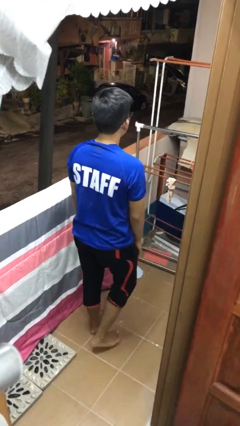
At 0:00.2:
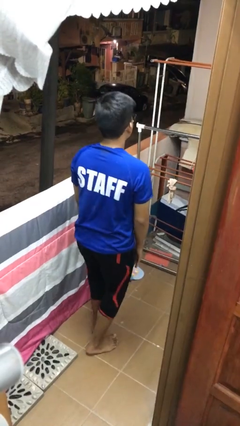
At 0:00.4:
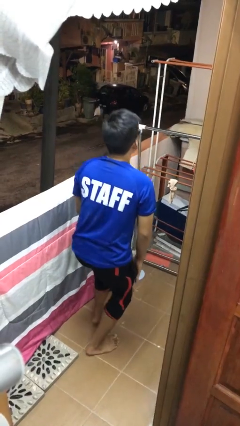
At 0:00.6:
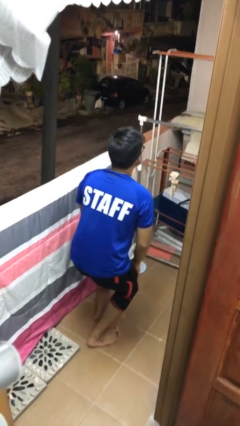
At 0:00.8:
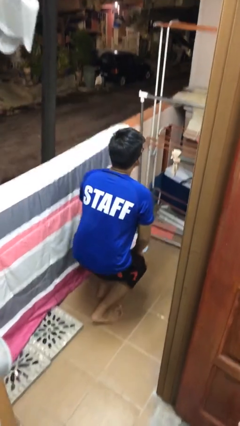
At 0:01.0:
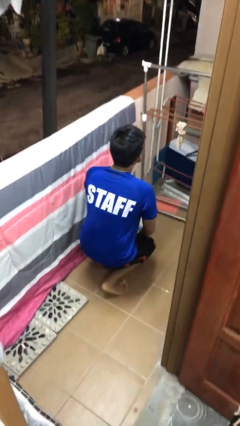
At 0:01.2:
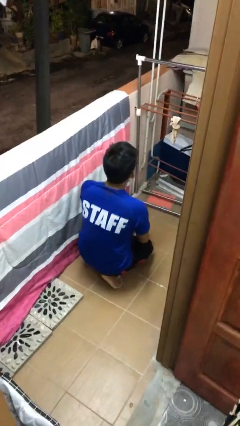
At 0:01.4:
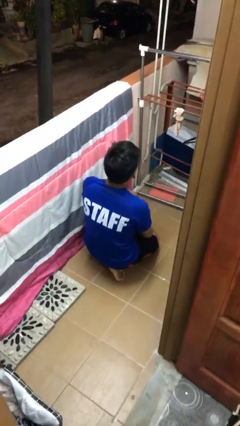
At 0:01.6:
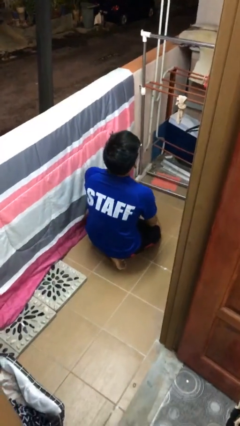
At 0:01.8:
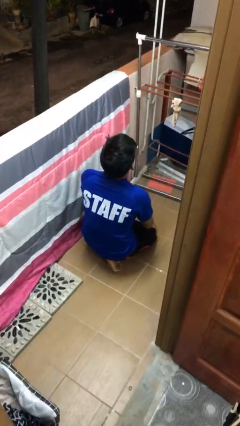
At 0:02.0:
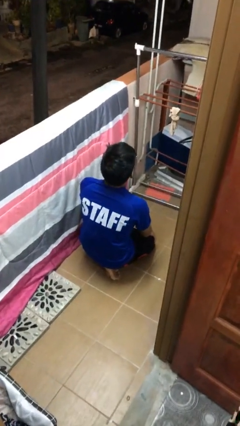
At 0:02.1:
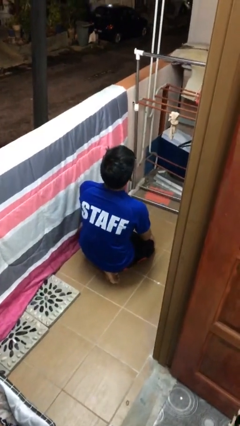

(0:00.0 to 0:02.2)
person kneels

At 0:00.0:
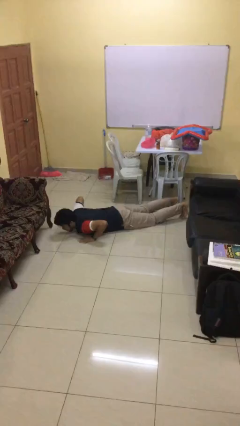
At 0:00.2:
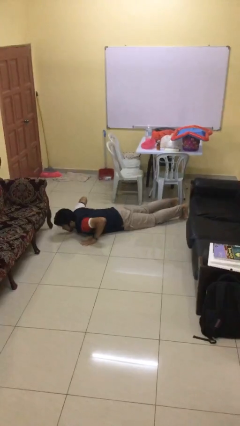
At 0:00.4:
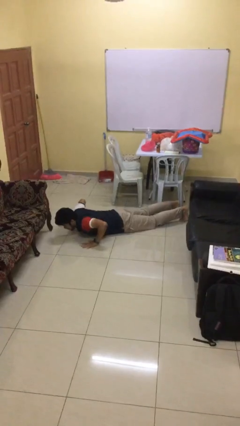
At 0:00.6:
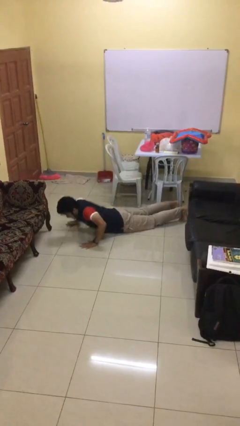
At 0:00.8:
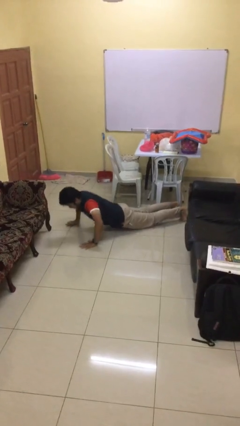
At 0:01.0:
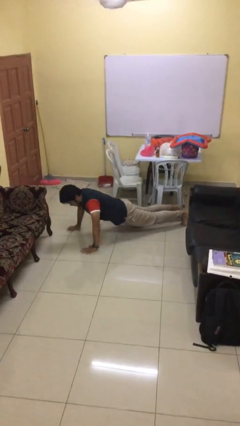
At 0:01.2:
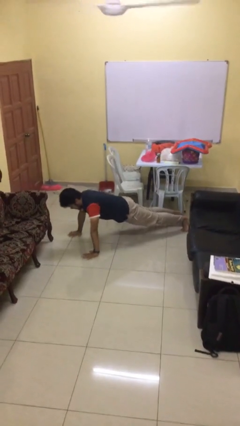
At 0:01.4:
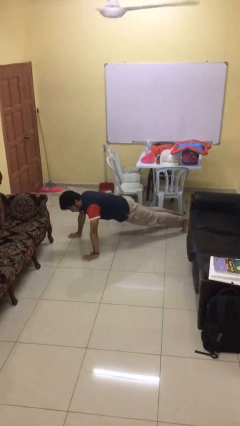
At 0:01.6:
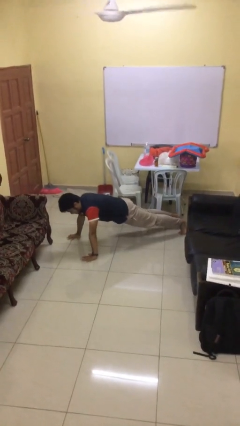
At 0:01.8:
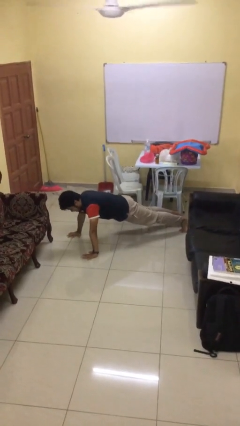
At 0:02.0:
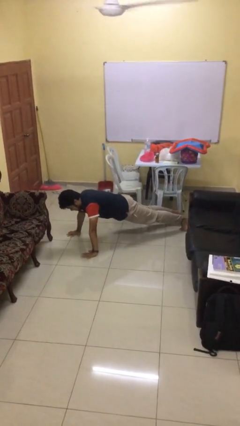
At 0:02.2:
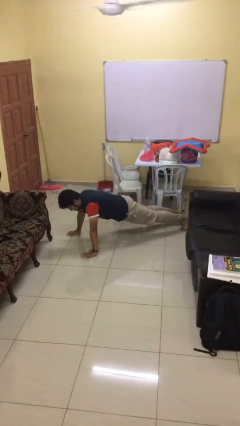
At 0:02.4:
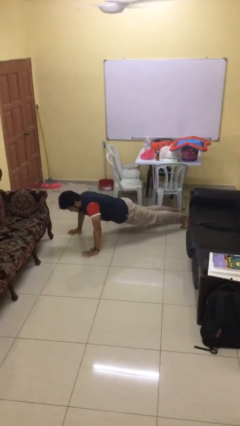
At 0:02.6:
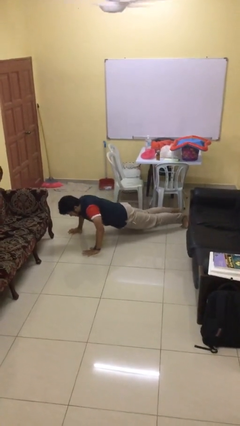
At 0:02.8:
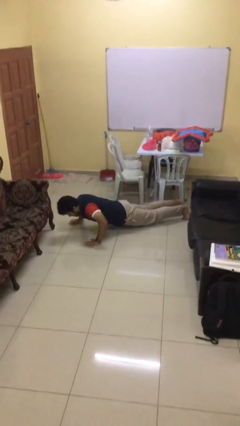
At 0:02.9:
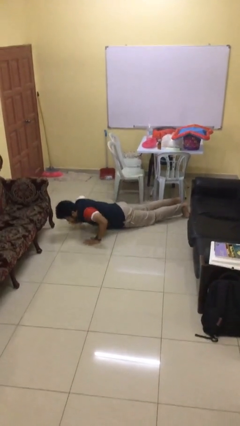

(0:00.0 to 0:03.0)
person exercises with pushup

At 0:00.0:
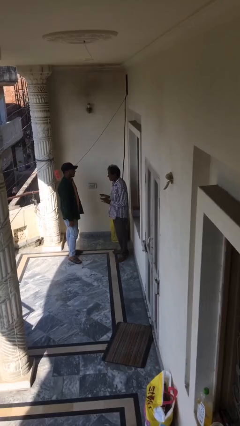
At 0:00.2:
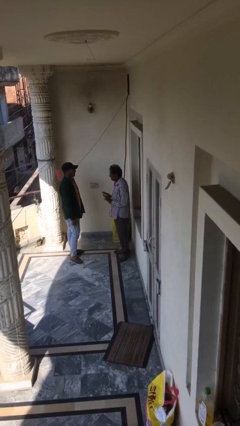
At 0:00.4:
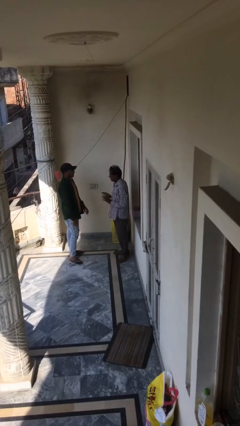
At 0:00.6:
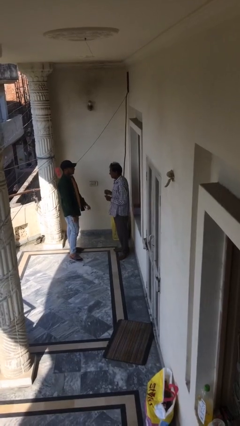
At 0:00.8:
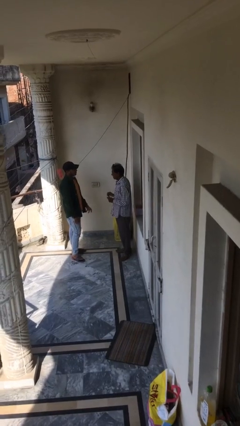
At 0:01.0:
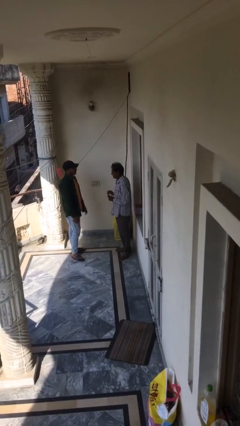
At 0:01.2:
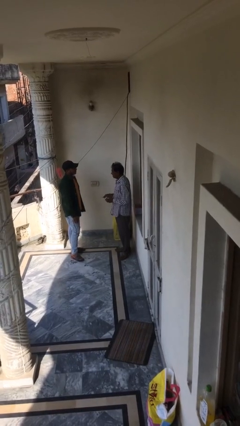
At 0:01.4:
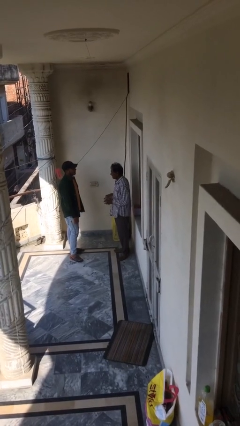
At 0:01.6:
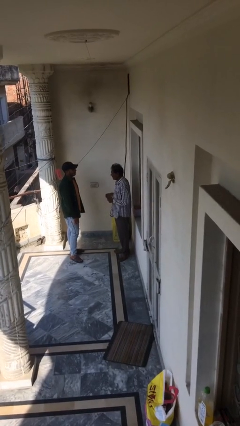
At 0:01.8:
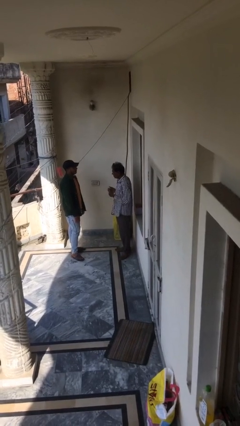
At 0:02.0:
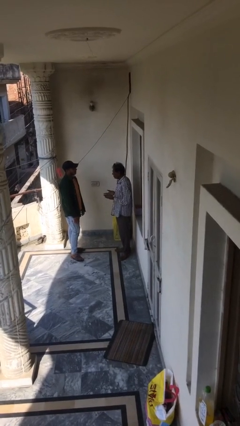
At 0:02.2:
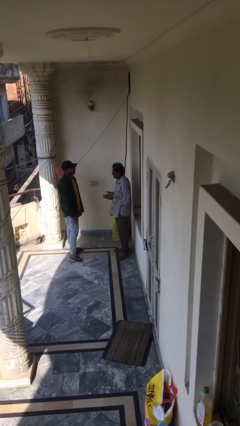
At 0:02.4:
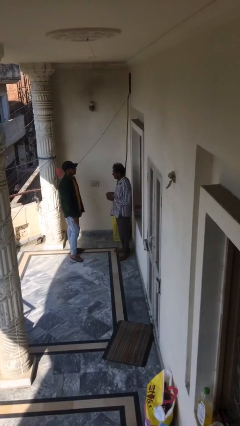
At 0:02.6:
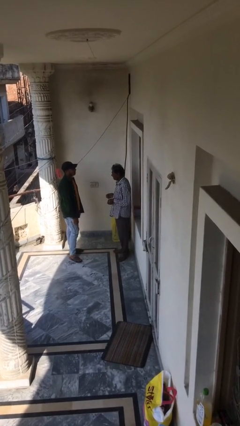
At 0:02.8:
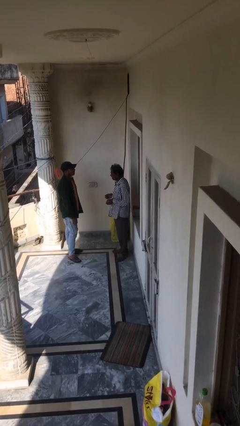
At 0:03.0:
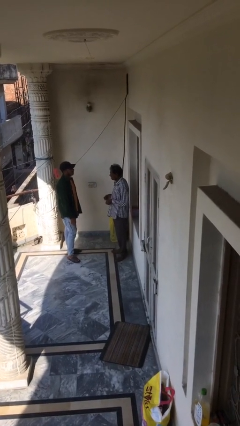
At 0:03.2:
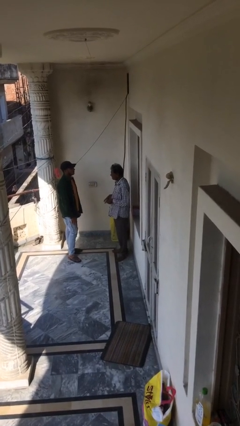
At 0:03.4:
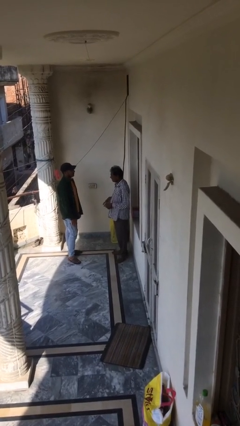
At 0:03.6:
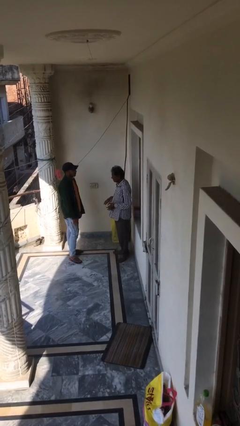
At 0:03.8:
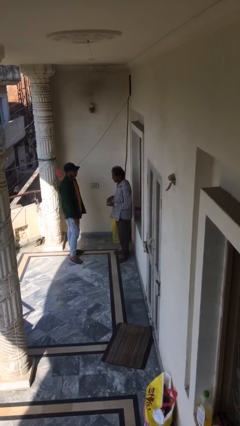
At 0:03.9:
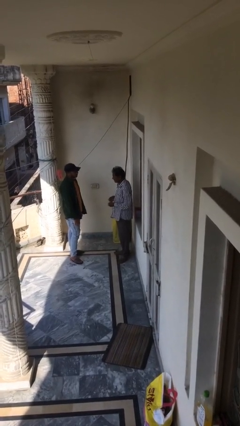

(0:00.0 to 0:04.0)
person talks to person

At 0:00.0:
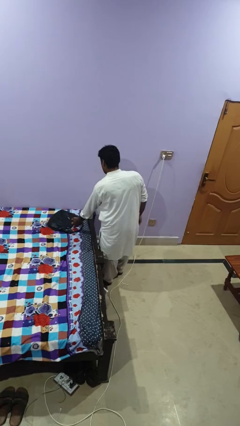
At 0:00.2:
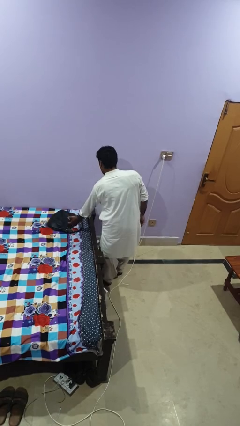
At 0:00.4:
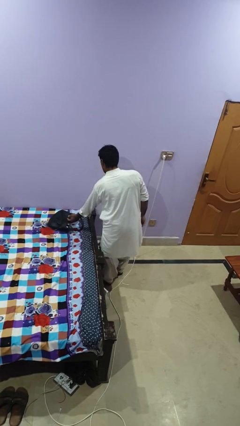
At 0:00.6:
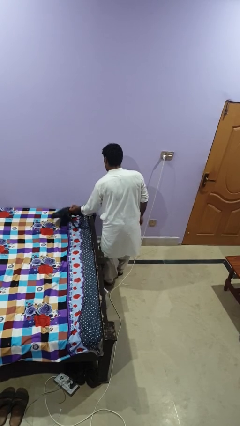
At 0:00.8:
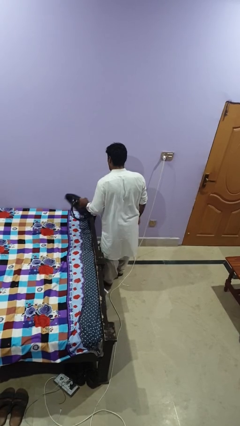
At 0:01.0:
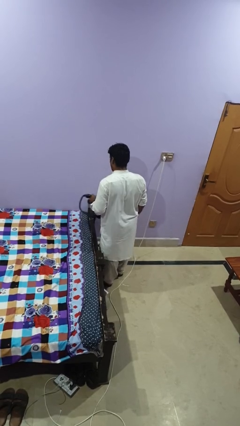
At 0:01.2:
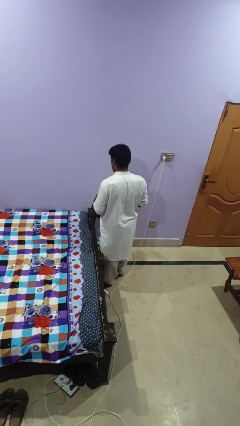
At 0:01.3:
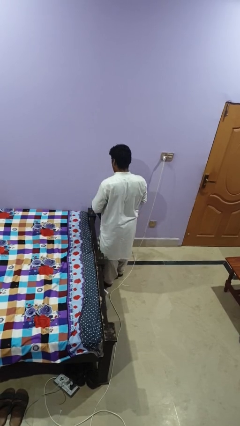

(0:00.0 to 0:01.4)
person picks up object from bed

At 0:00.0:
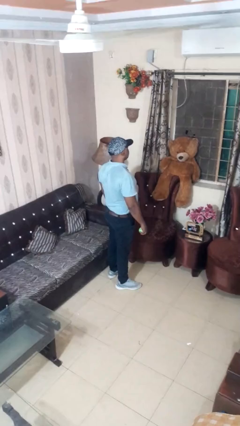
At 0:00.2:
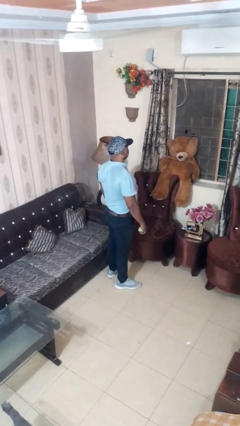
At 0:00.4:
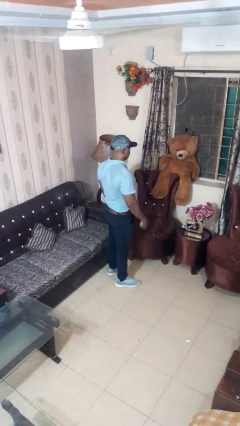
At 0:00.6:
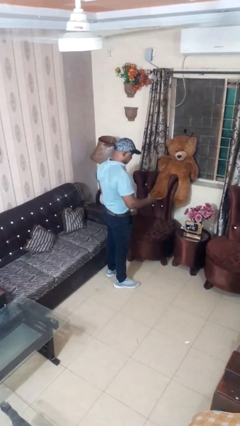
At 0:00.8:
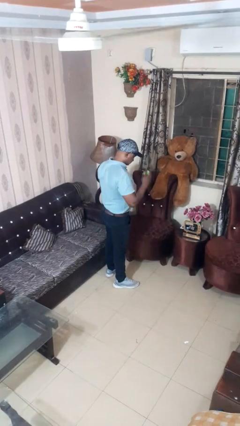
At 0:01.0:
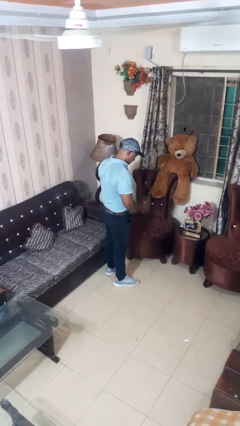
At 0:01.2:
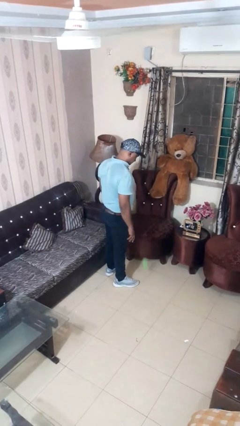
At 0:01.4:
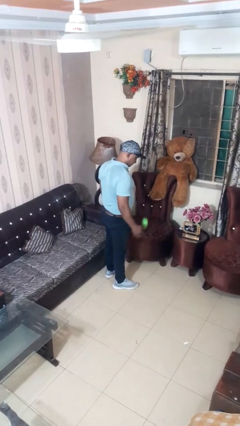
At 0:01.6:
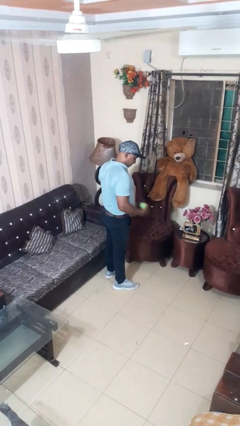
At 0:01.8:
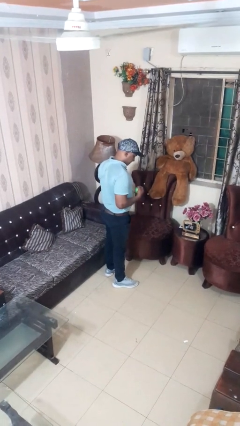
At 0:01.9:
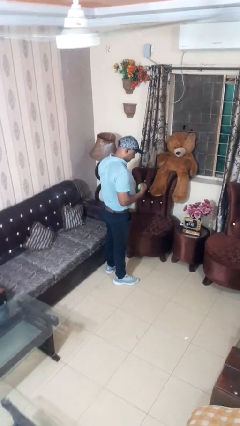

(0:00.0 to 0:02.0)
person bounces ball on floor

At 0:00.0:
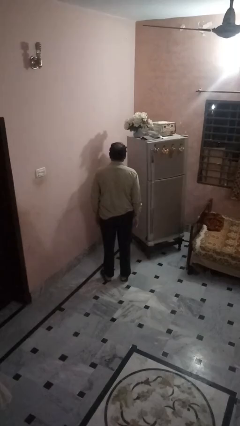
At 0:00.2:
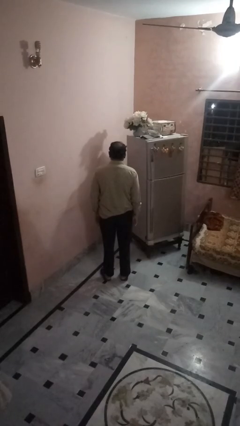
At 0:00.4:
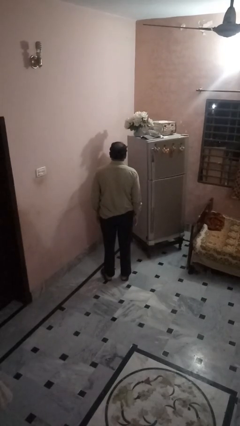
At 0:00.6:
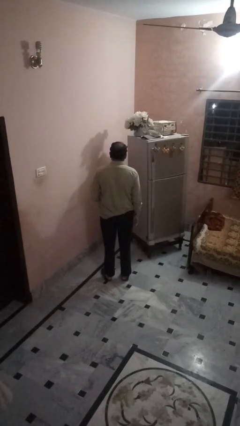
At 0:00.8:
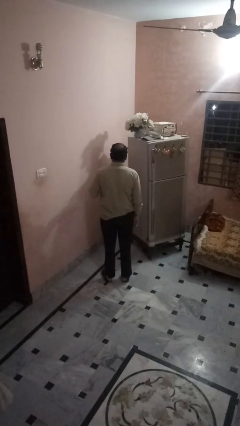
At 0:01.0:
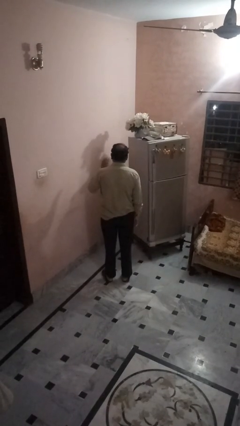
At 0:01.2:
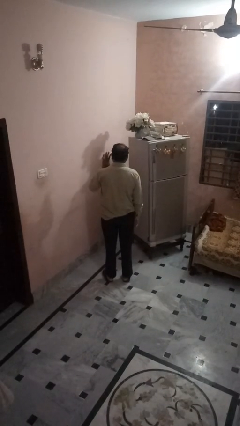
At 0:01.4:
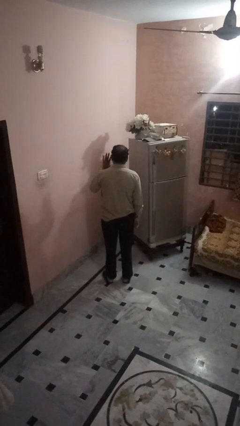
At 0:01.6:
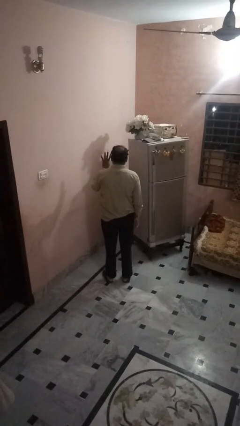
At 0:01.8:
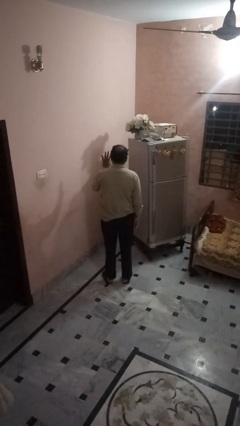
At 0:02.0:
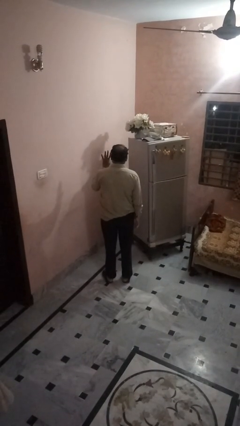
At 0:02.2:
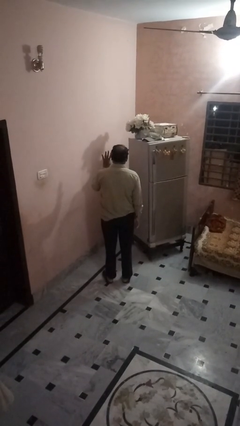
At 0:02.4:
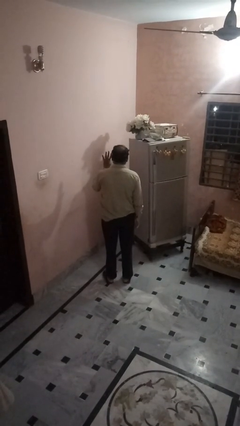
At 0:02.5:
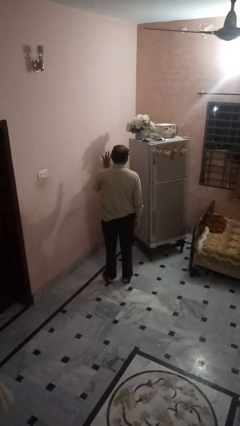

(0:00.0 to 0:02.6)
person gestures number four

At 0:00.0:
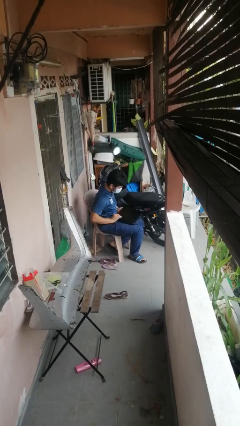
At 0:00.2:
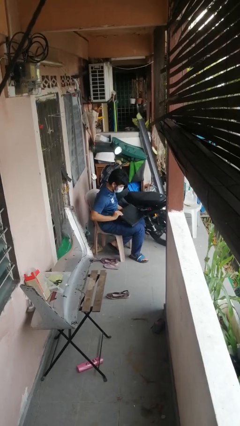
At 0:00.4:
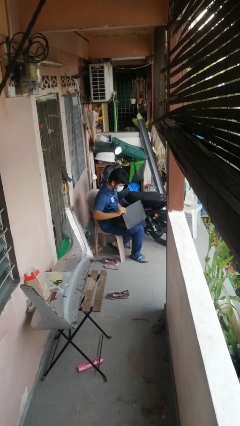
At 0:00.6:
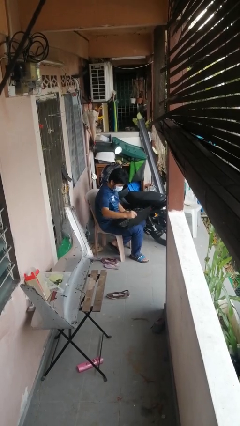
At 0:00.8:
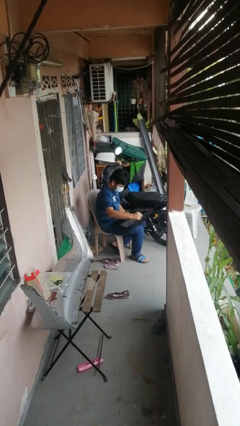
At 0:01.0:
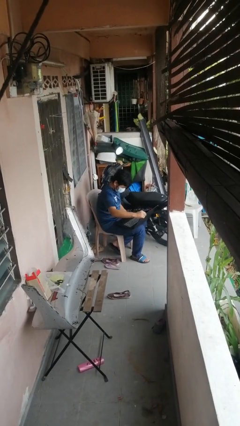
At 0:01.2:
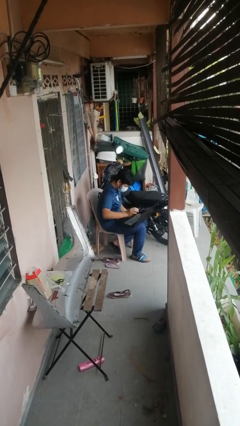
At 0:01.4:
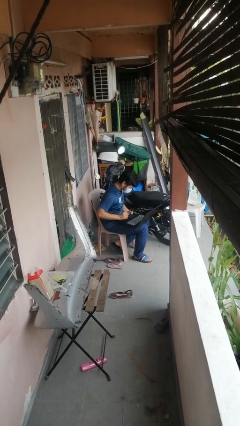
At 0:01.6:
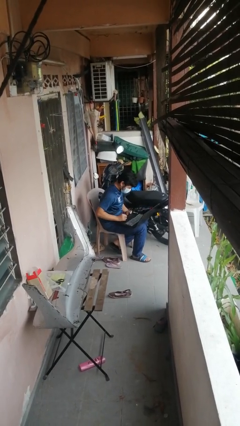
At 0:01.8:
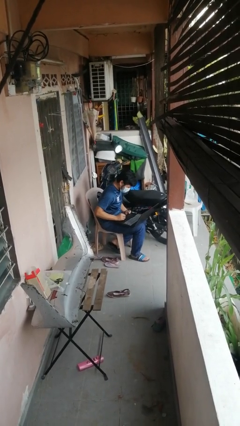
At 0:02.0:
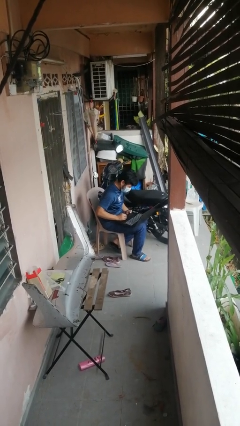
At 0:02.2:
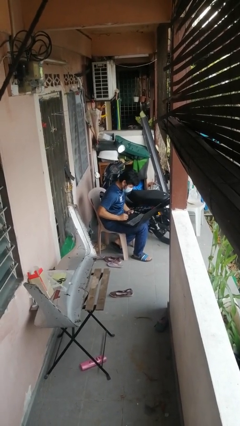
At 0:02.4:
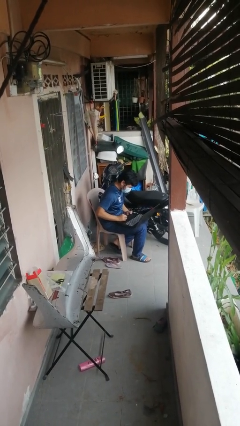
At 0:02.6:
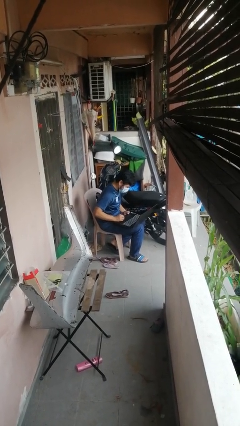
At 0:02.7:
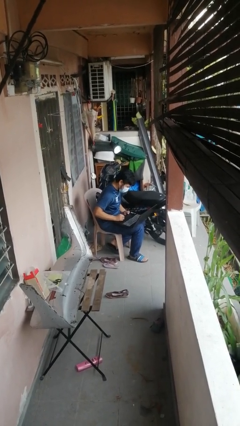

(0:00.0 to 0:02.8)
person opens laptop
